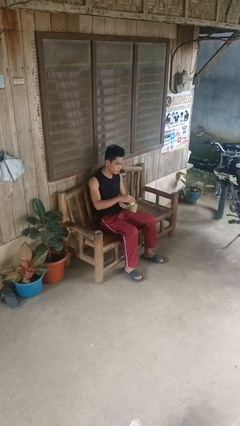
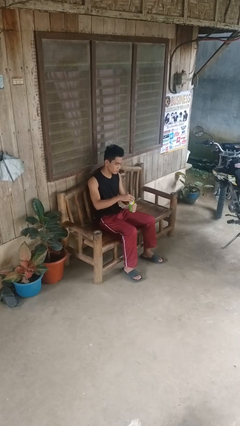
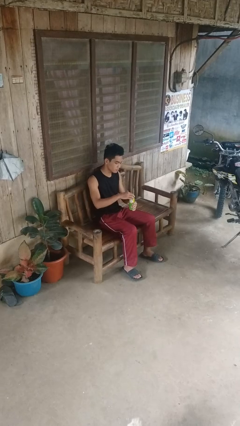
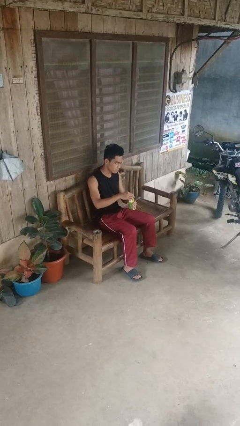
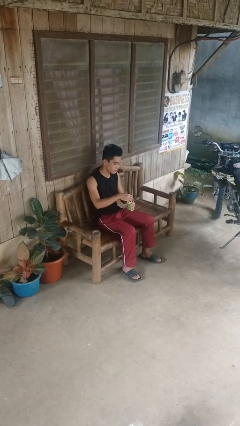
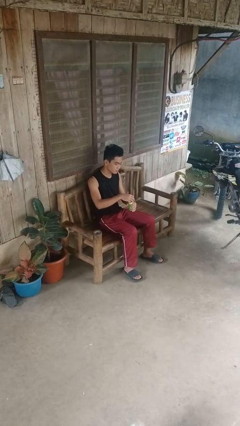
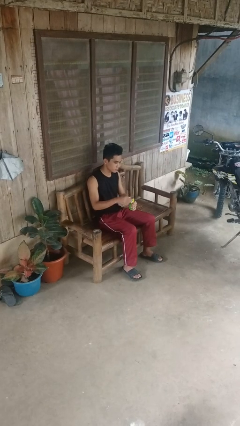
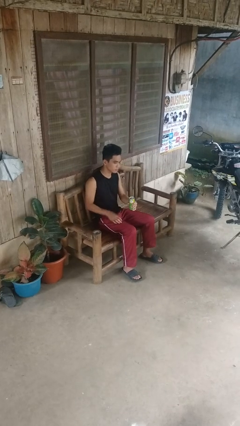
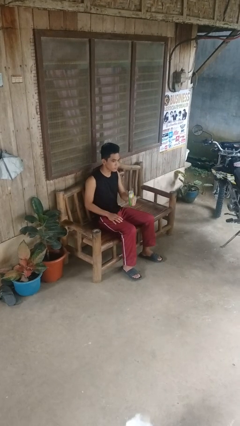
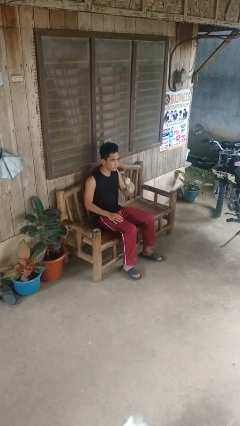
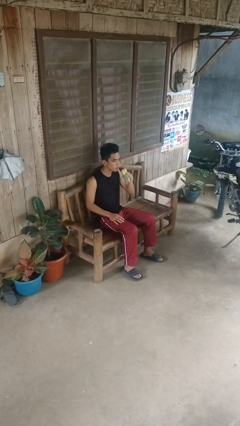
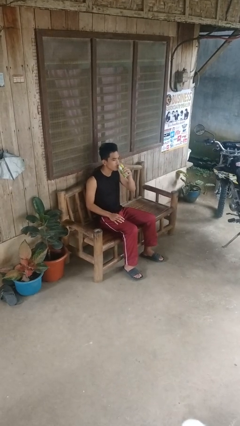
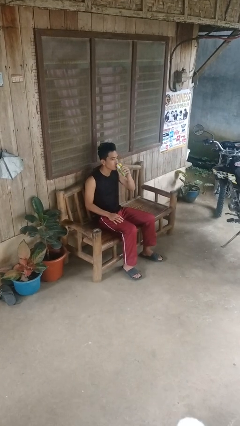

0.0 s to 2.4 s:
person opens beverage can

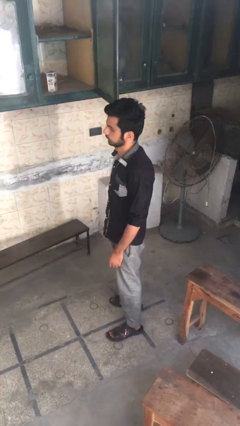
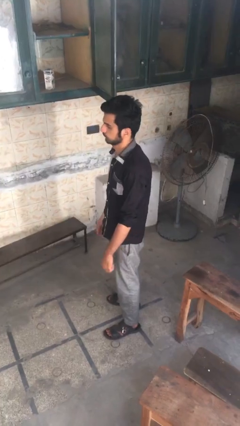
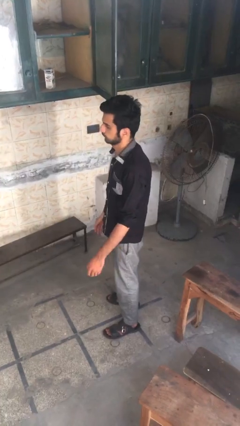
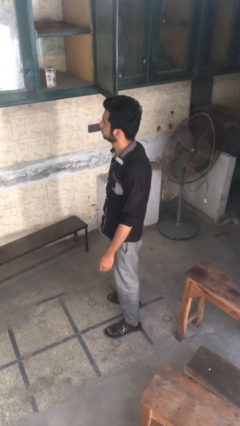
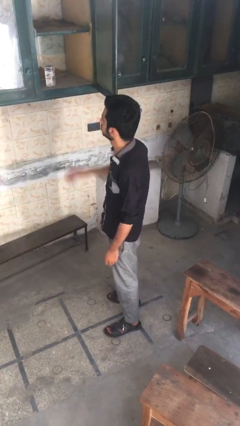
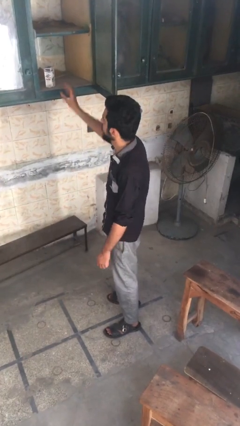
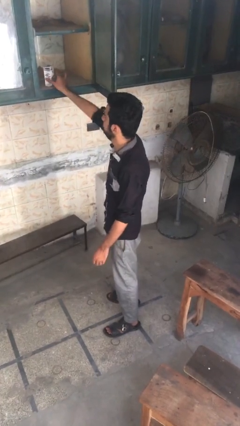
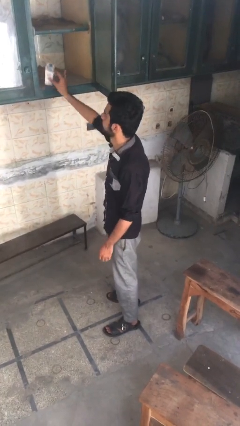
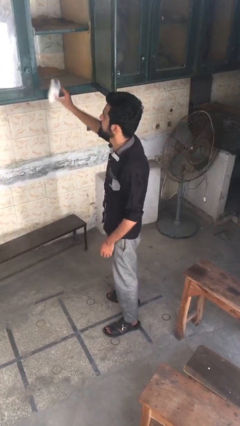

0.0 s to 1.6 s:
person takes object from cabinet

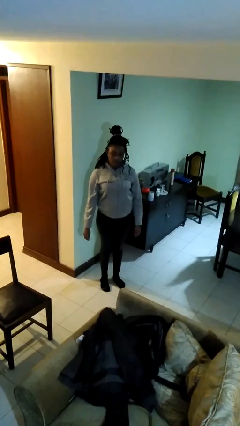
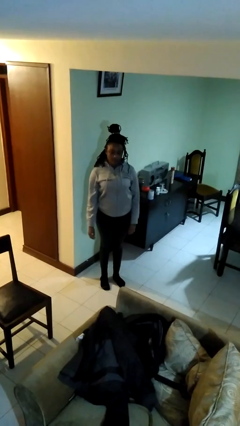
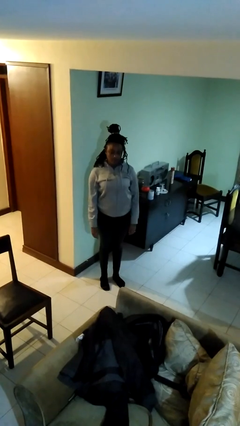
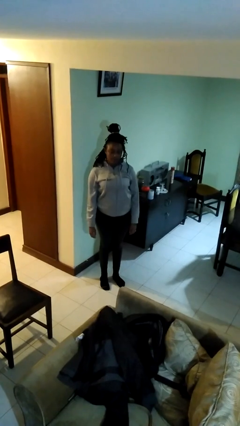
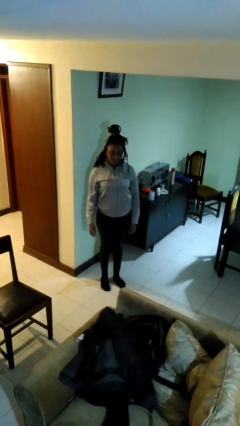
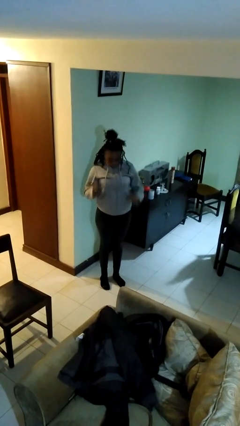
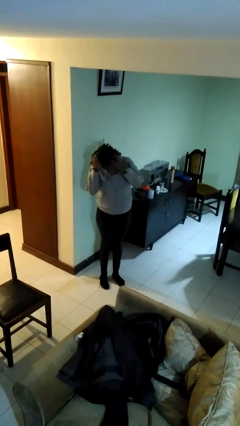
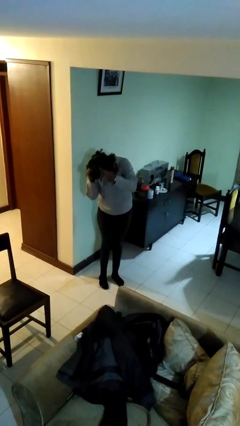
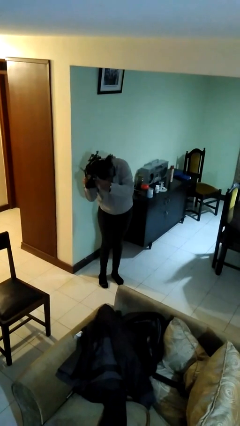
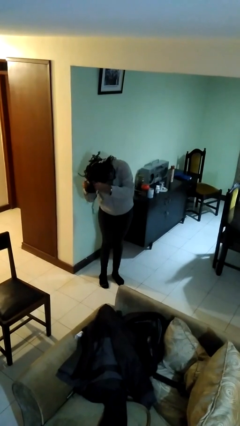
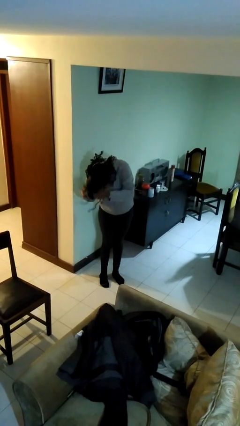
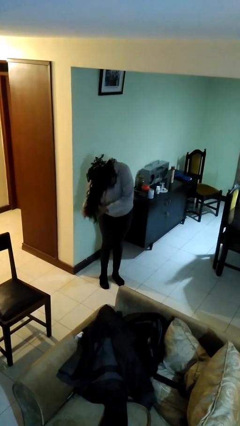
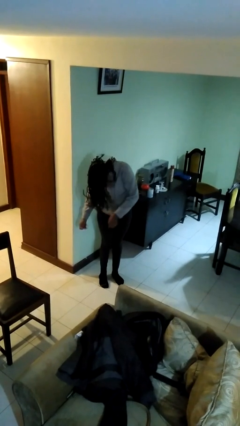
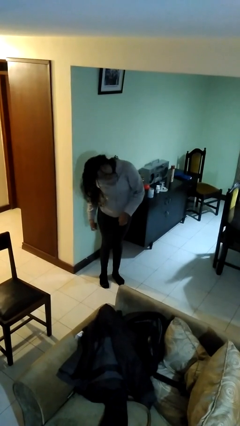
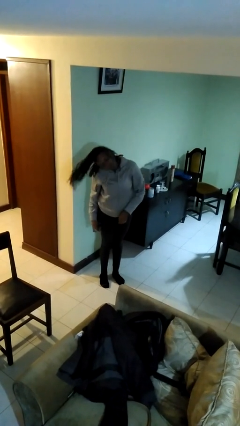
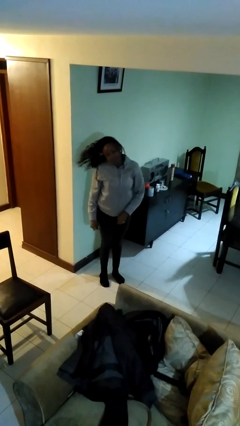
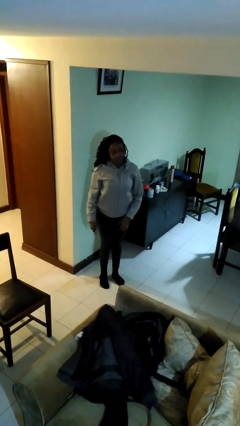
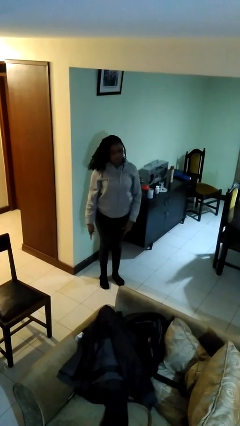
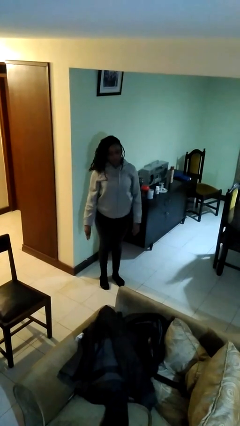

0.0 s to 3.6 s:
person takes off hairtie

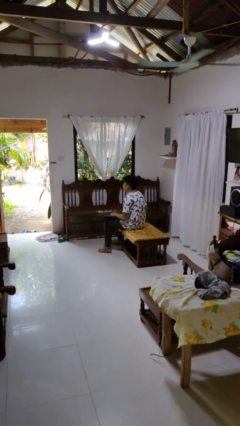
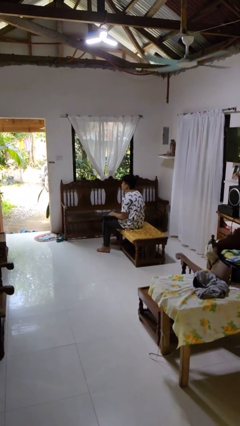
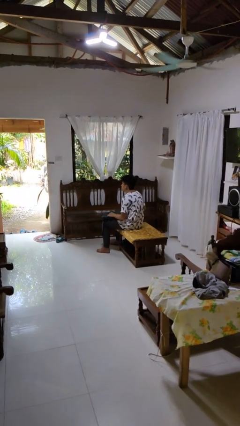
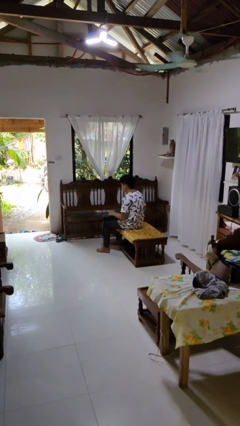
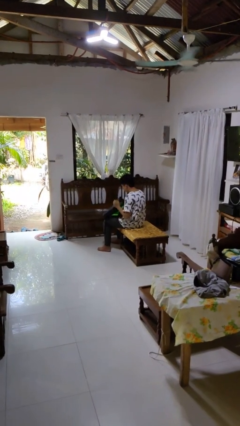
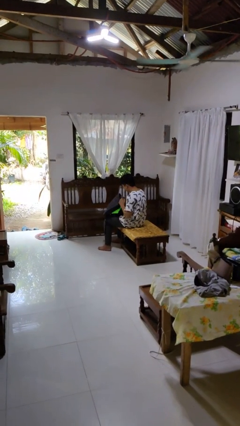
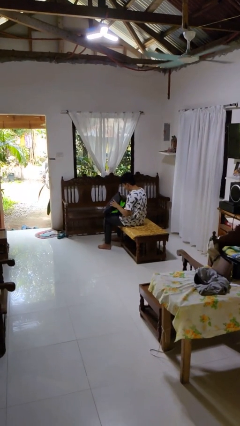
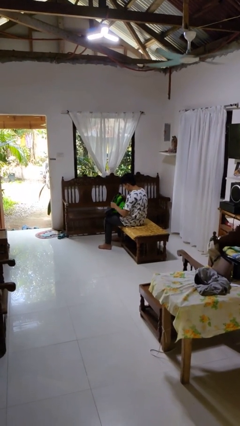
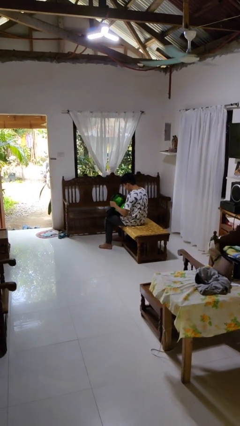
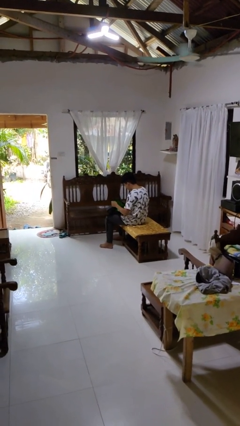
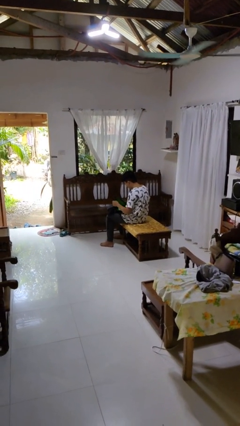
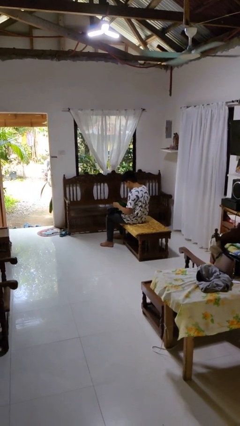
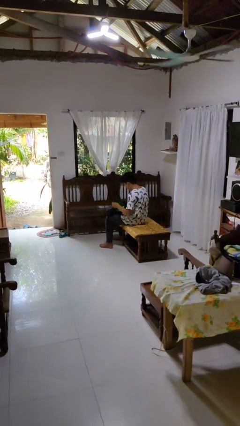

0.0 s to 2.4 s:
person searches in backpack

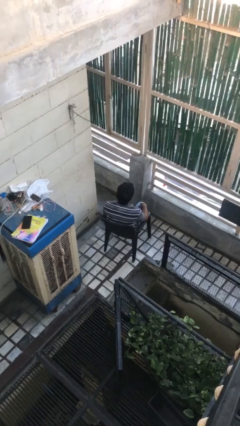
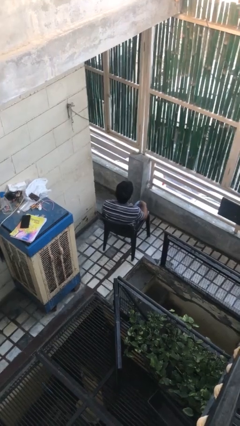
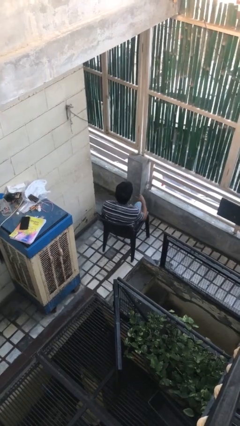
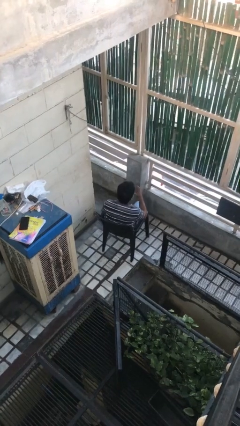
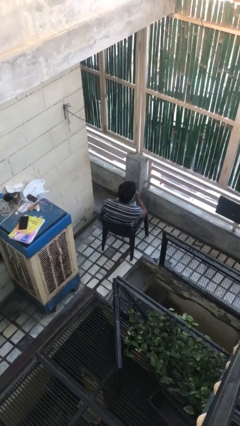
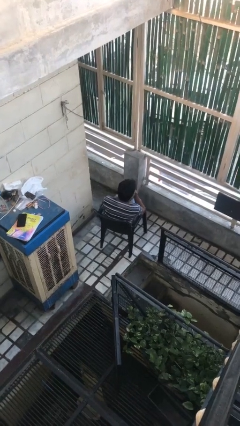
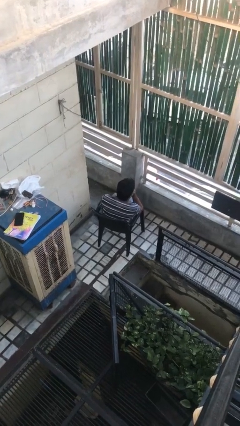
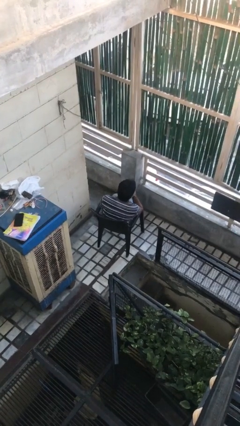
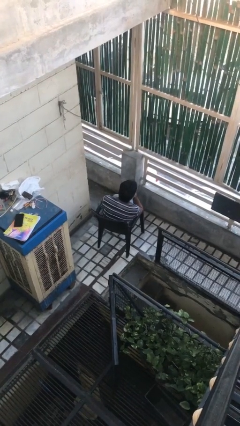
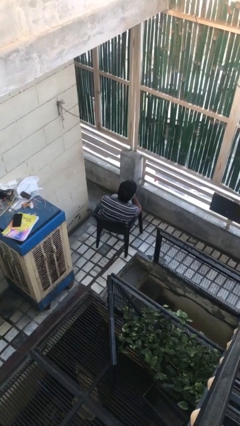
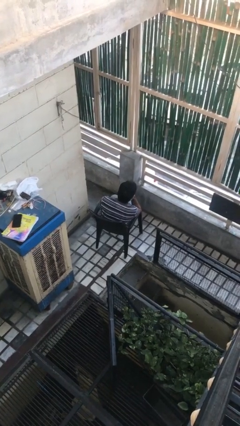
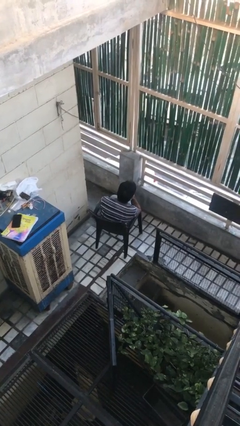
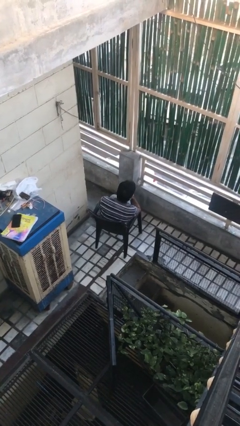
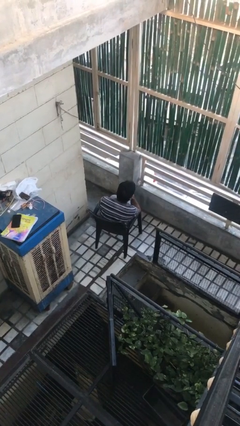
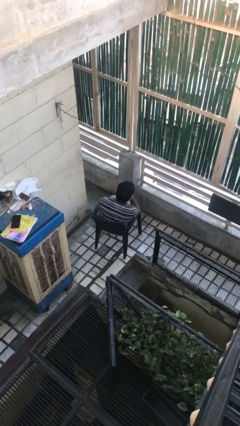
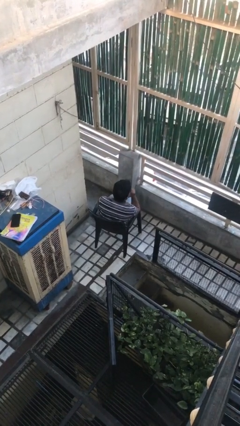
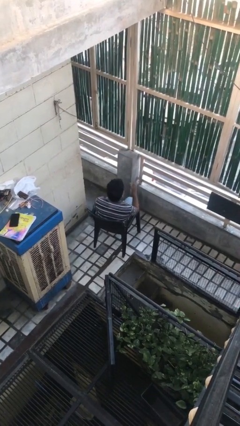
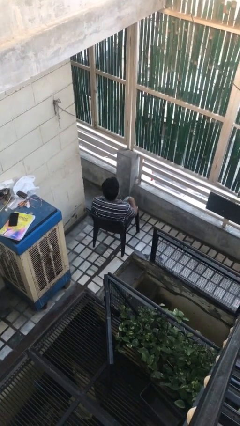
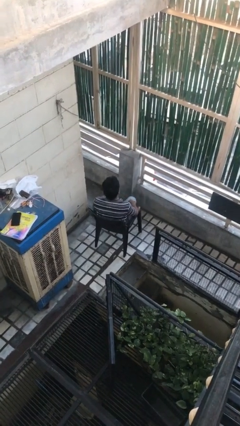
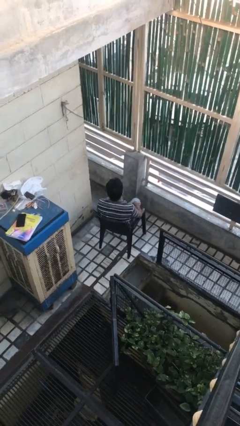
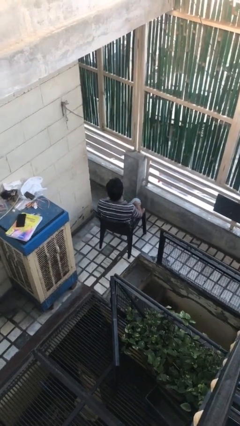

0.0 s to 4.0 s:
person strokes chin

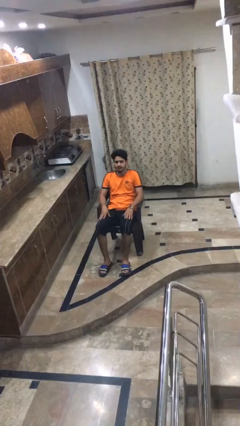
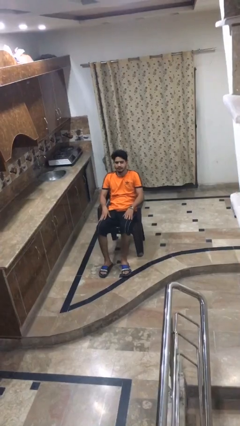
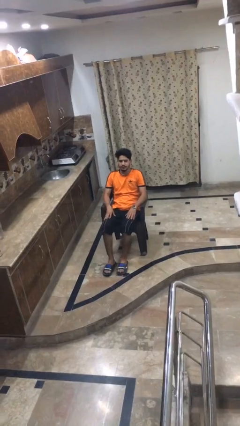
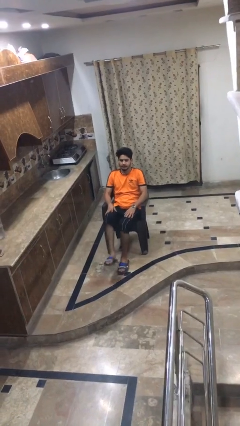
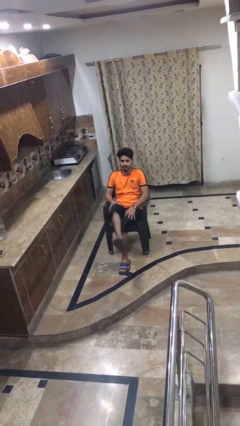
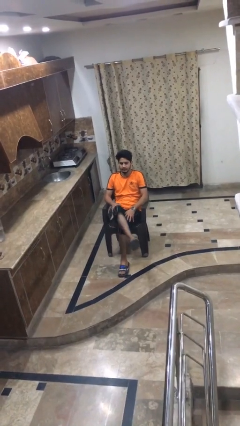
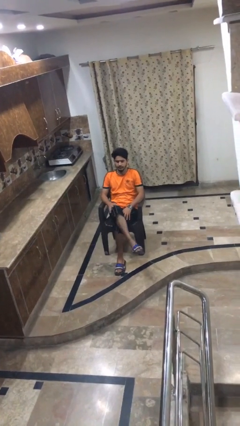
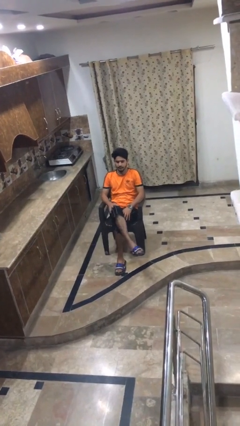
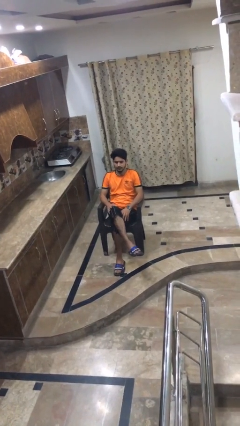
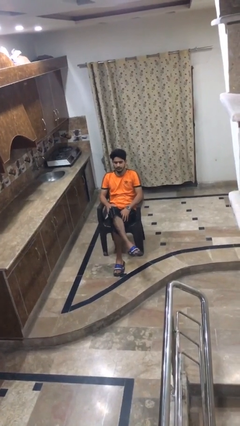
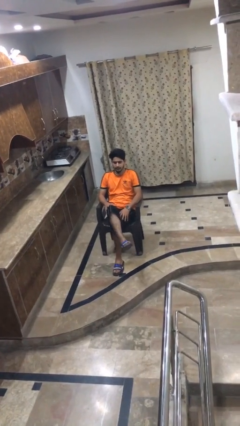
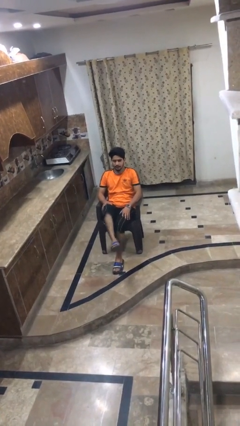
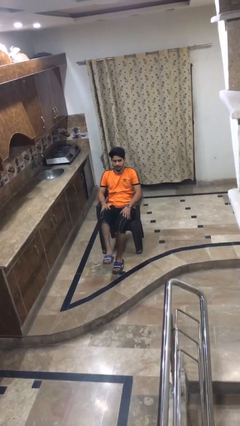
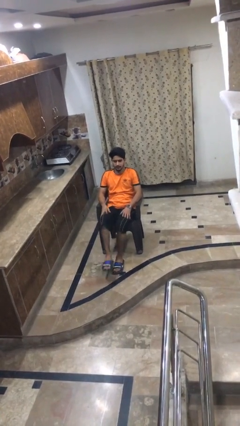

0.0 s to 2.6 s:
person crosses legs

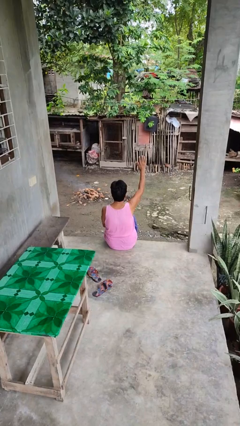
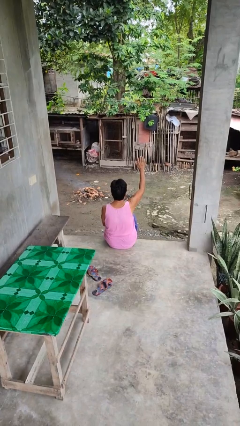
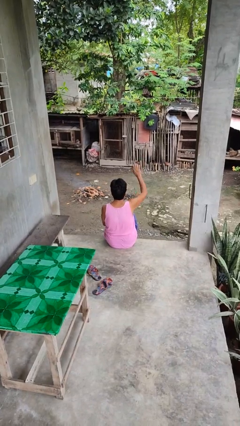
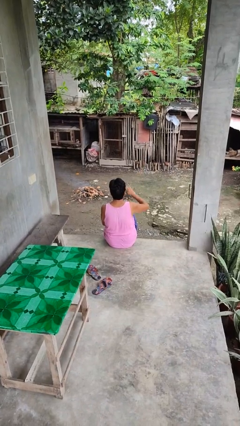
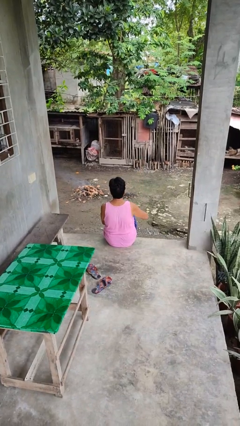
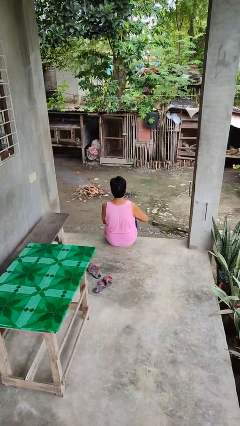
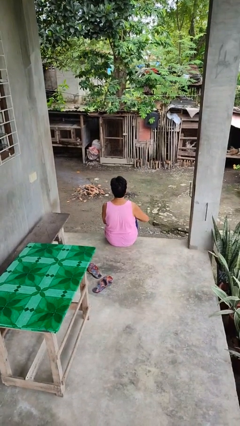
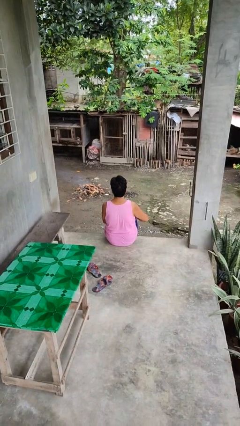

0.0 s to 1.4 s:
person gestures swipe down
